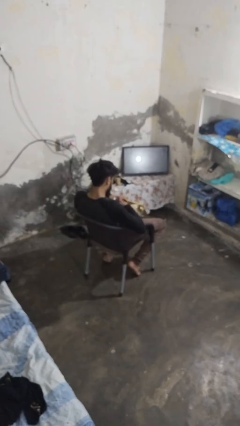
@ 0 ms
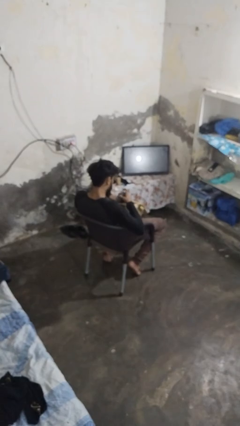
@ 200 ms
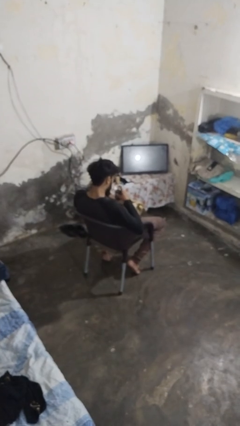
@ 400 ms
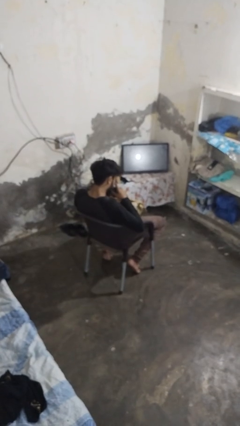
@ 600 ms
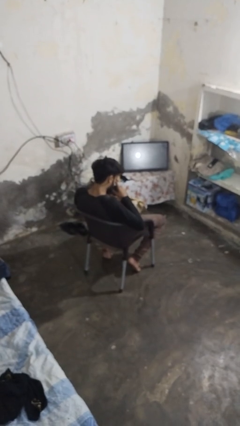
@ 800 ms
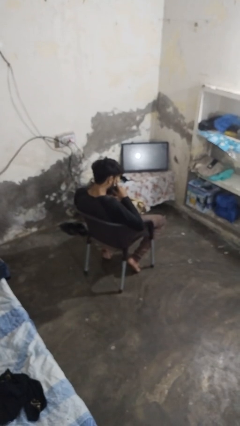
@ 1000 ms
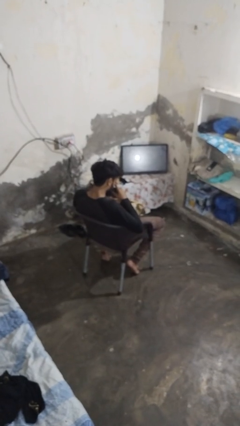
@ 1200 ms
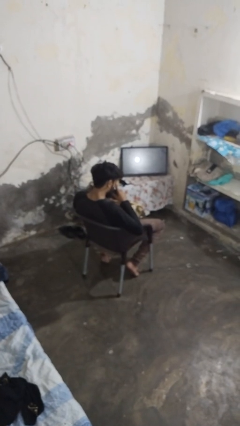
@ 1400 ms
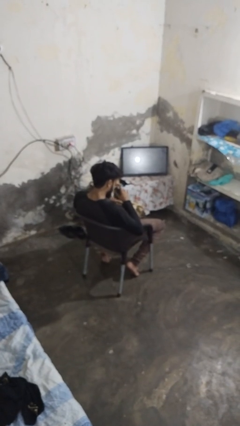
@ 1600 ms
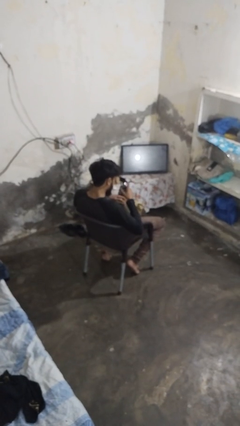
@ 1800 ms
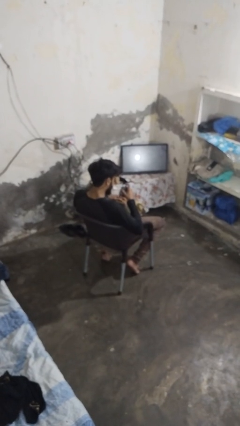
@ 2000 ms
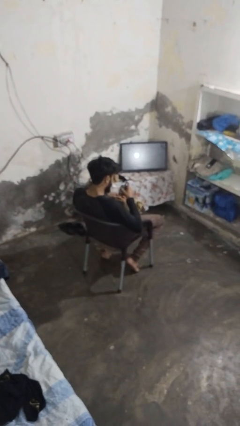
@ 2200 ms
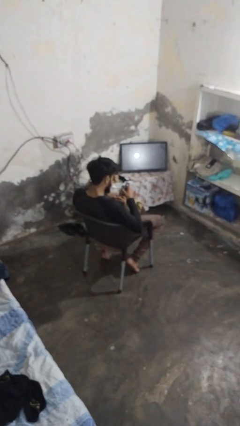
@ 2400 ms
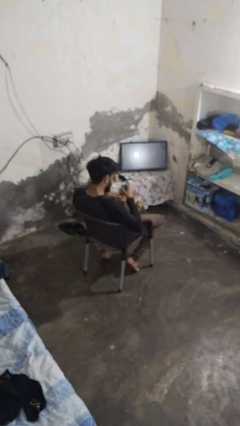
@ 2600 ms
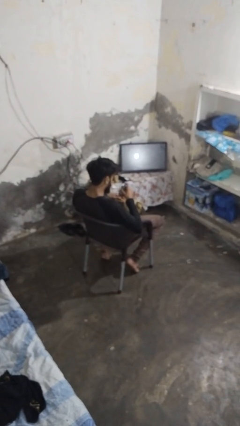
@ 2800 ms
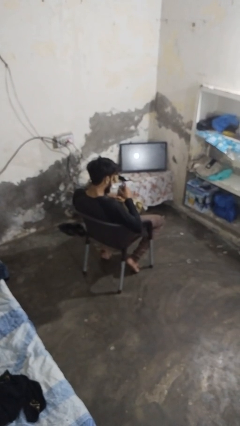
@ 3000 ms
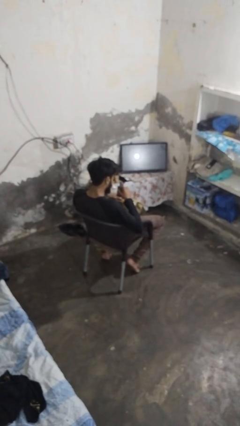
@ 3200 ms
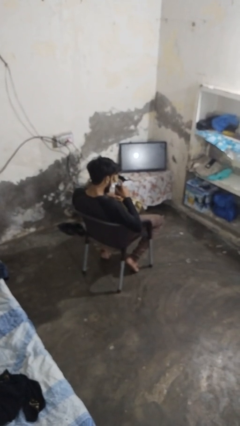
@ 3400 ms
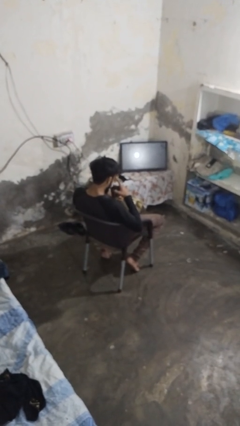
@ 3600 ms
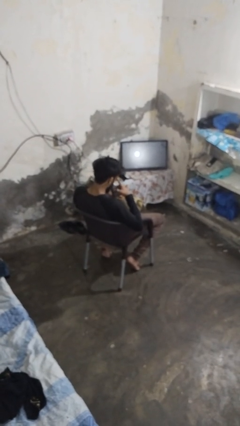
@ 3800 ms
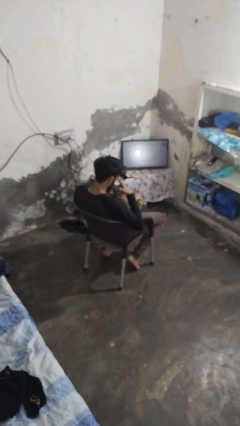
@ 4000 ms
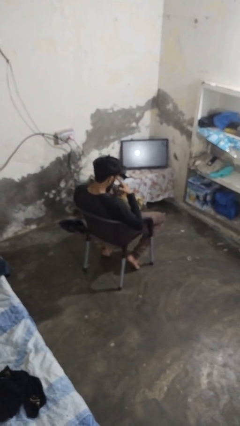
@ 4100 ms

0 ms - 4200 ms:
person takes object from purse

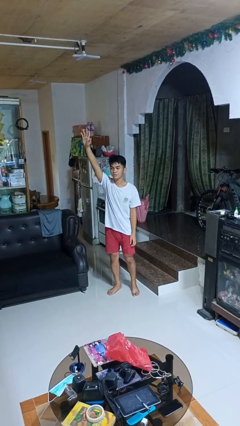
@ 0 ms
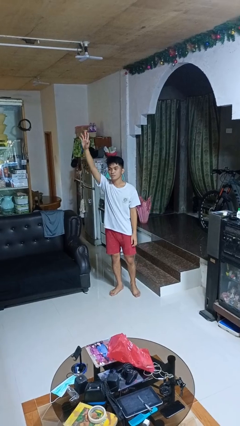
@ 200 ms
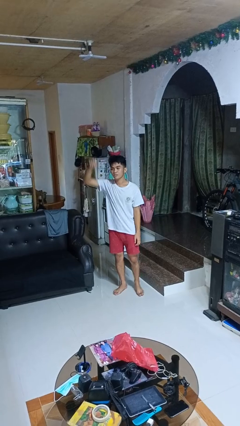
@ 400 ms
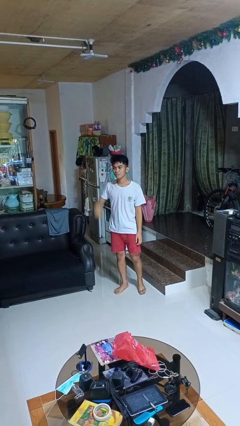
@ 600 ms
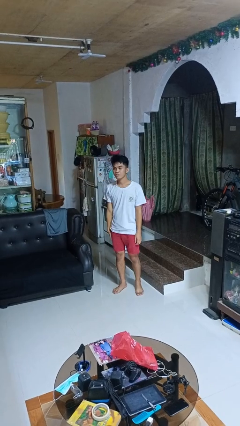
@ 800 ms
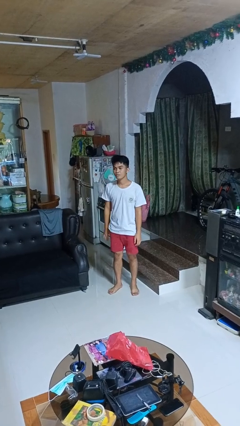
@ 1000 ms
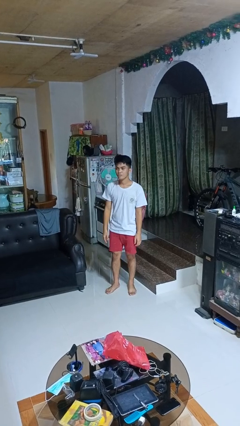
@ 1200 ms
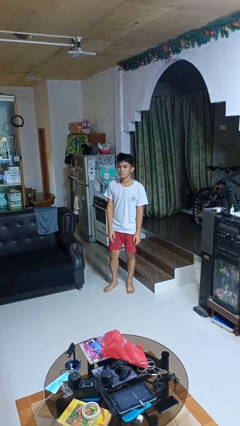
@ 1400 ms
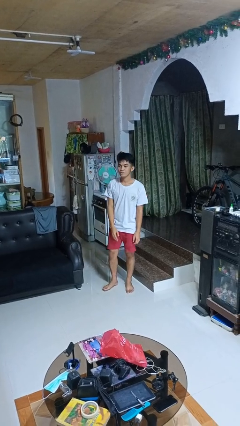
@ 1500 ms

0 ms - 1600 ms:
person gestures lower hand

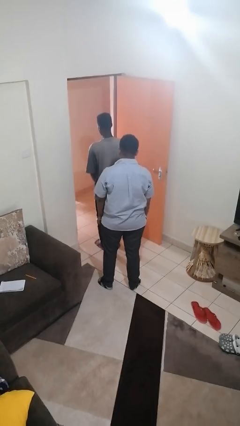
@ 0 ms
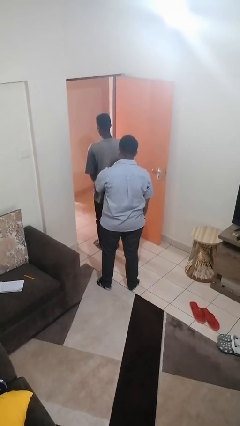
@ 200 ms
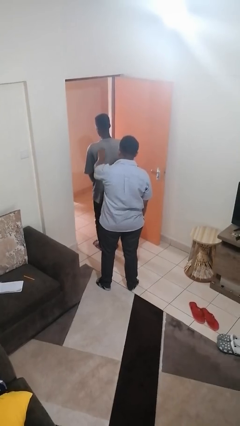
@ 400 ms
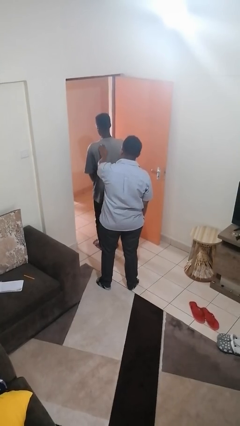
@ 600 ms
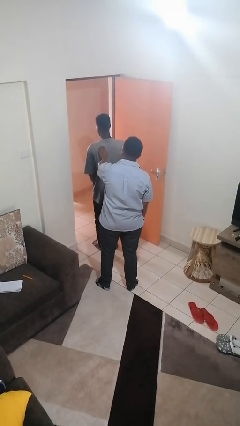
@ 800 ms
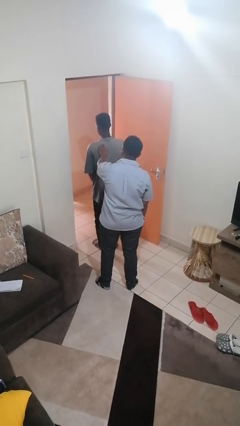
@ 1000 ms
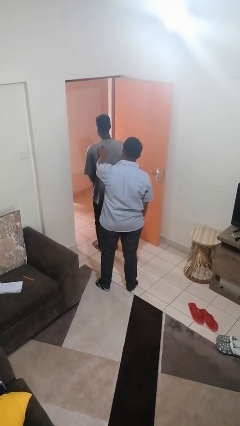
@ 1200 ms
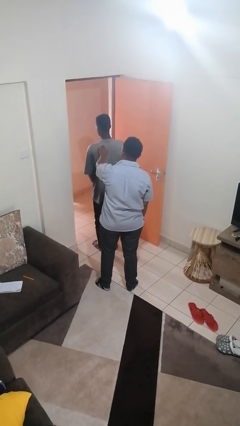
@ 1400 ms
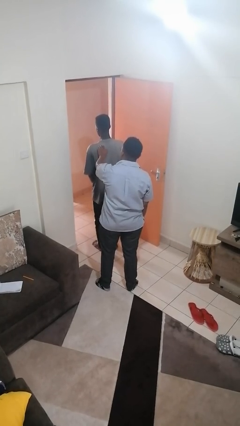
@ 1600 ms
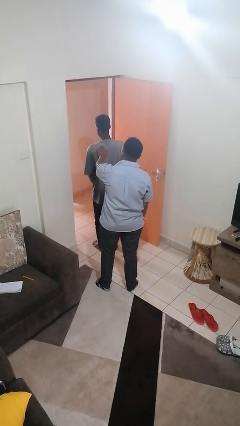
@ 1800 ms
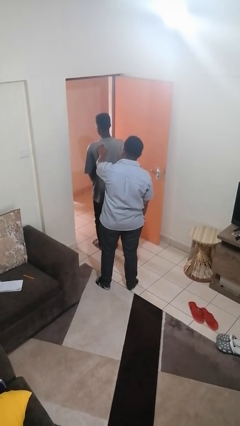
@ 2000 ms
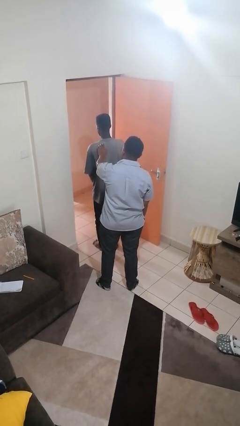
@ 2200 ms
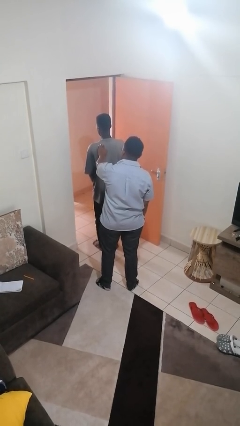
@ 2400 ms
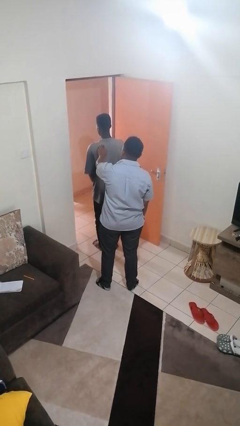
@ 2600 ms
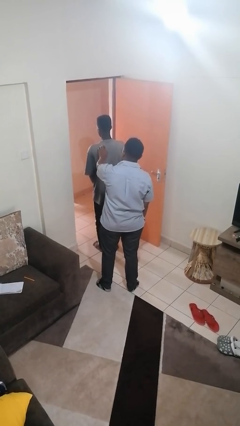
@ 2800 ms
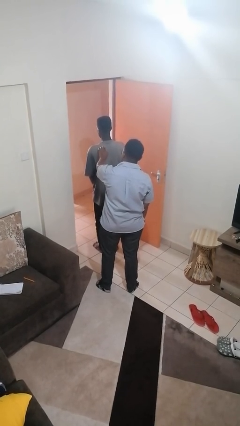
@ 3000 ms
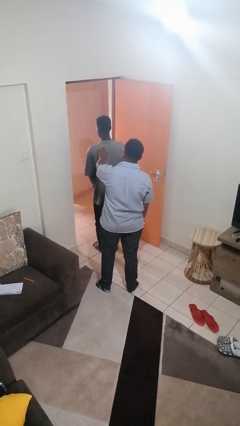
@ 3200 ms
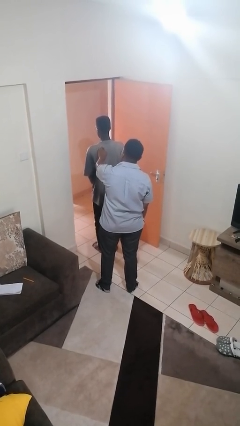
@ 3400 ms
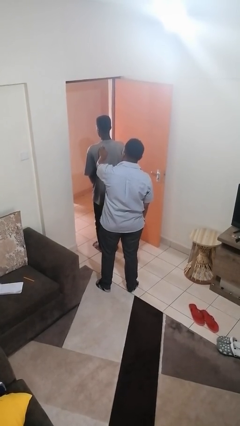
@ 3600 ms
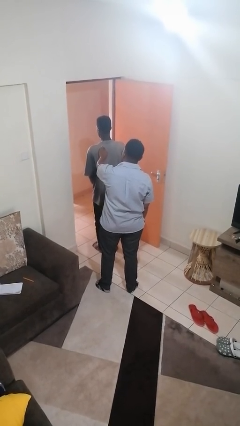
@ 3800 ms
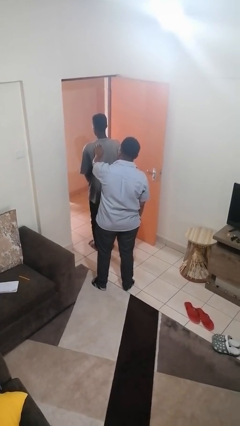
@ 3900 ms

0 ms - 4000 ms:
person touches back of person

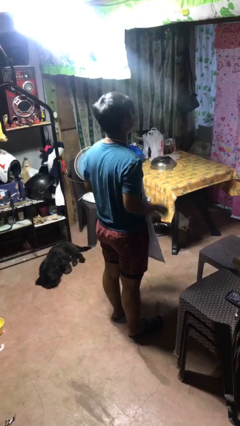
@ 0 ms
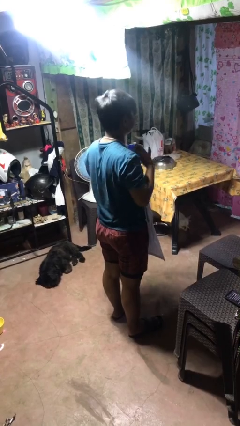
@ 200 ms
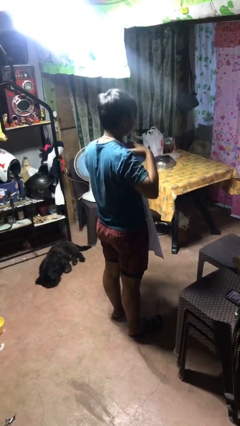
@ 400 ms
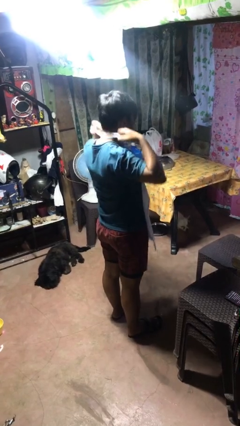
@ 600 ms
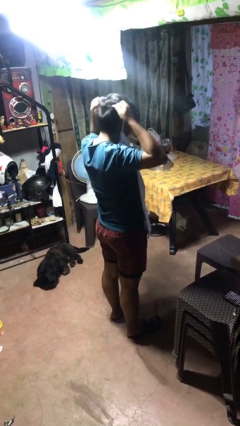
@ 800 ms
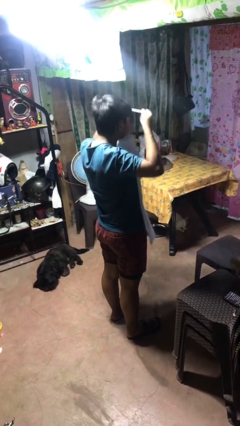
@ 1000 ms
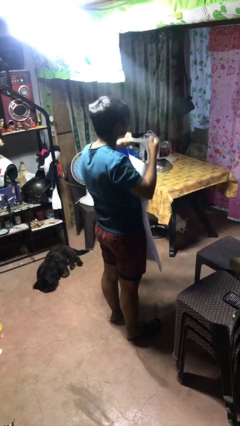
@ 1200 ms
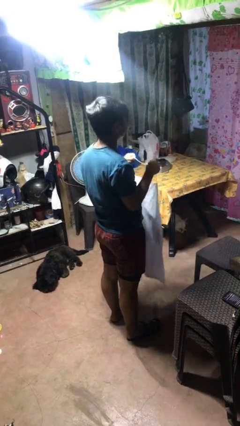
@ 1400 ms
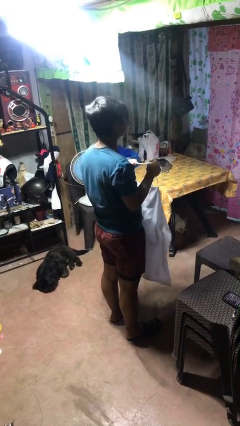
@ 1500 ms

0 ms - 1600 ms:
person takes off apron

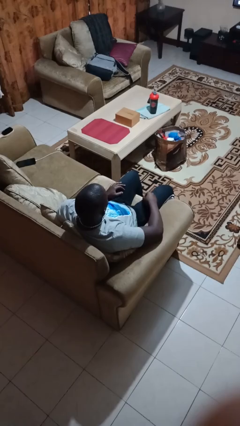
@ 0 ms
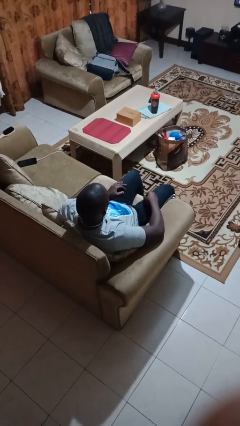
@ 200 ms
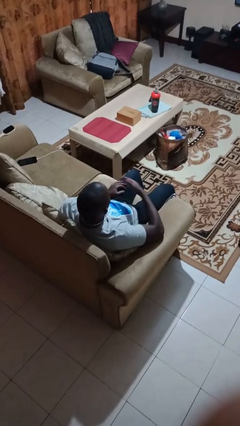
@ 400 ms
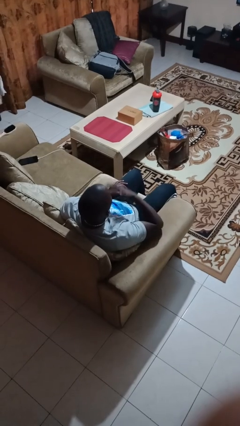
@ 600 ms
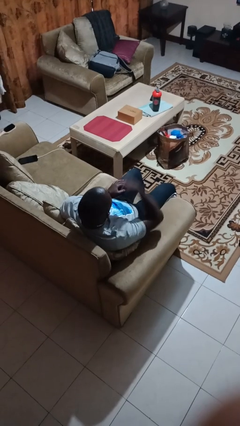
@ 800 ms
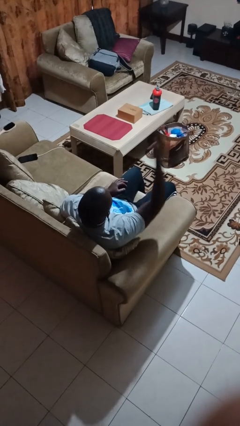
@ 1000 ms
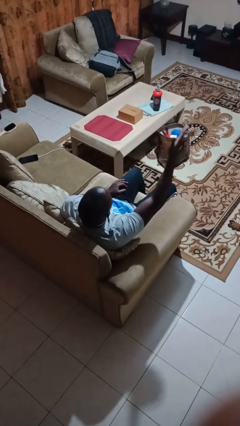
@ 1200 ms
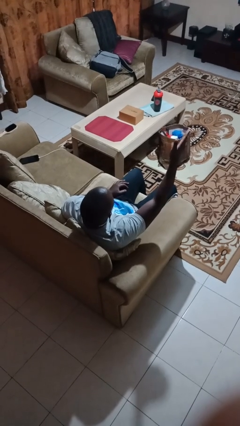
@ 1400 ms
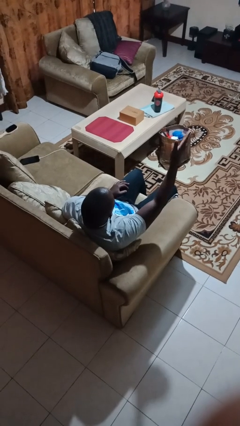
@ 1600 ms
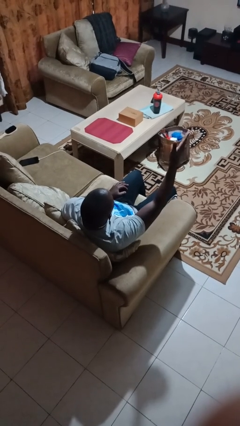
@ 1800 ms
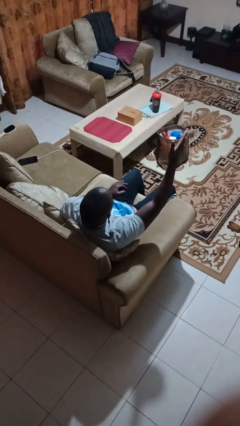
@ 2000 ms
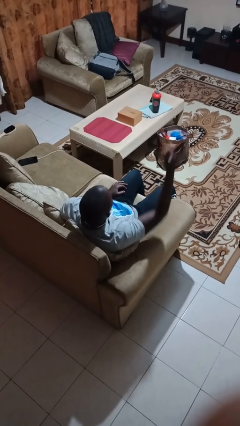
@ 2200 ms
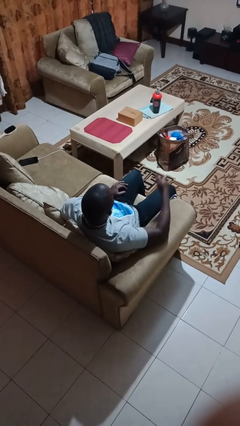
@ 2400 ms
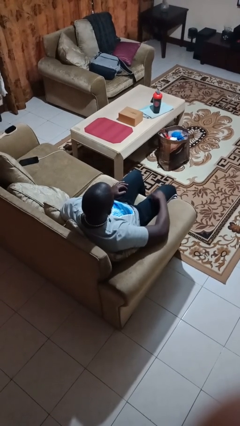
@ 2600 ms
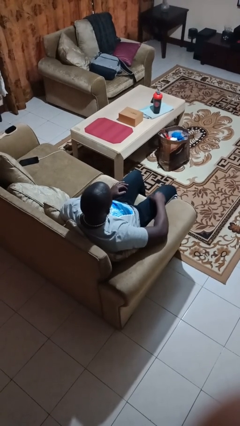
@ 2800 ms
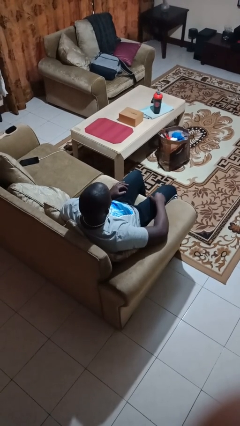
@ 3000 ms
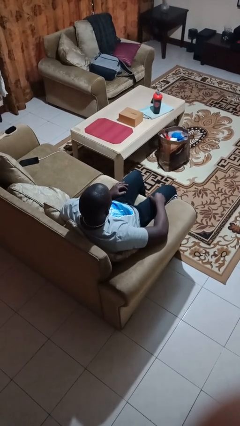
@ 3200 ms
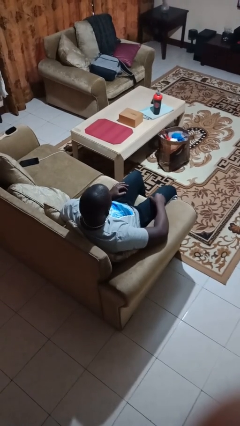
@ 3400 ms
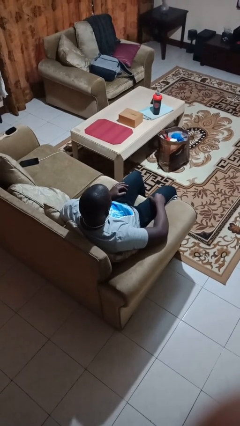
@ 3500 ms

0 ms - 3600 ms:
person gestures blow kiss

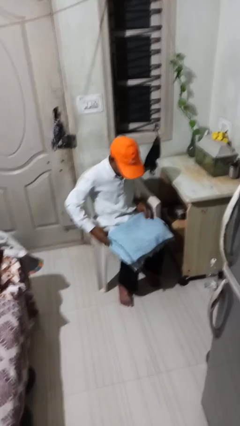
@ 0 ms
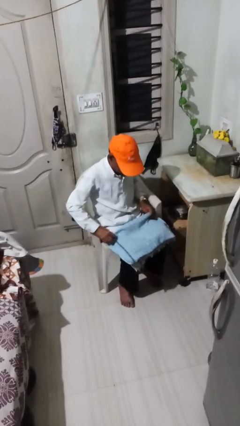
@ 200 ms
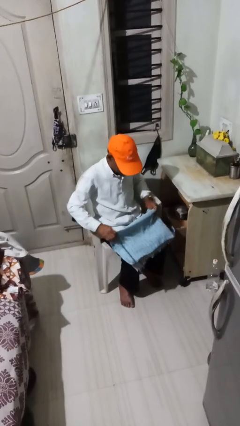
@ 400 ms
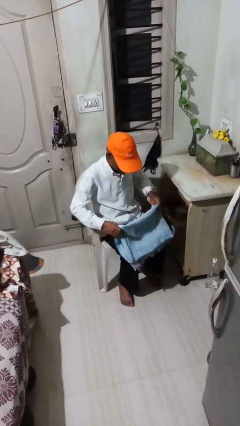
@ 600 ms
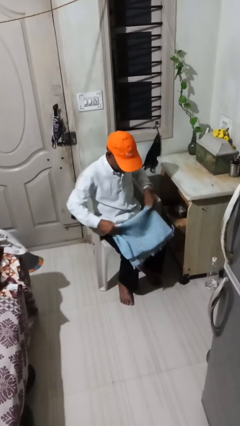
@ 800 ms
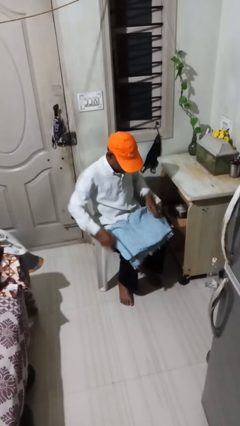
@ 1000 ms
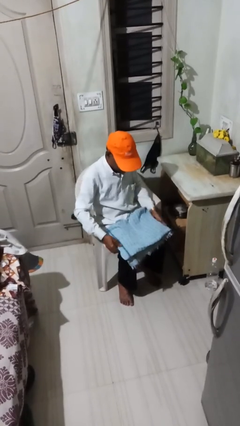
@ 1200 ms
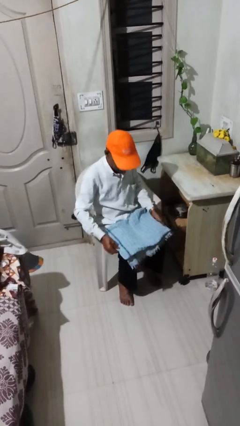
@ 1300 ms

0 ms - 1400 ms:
person spreads tablecloth

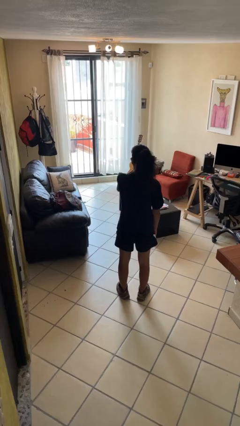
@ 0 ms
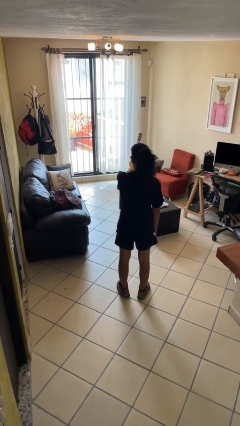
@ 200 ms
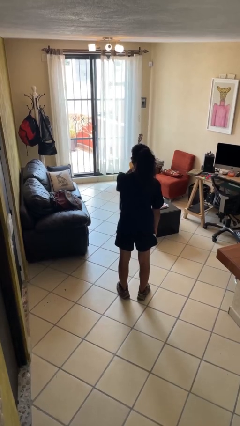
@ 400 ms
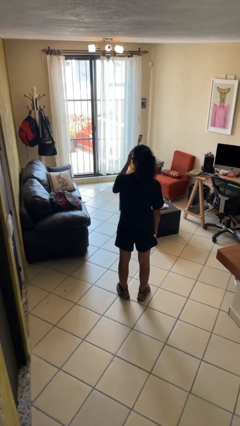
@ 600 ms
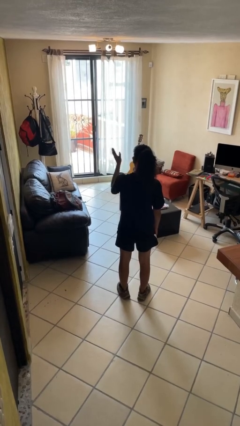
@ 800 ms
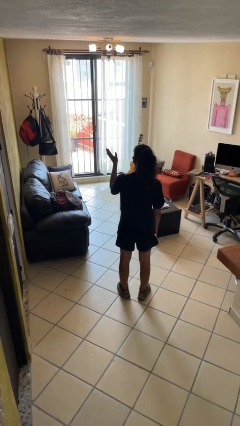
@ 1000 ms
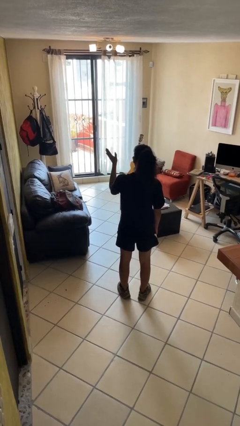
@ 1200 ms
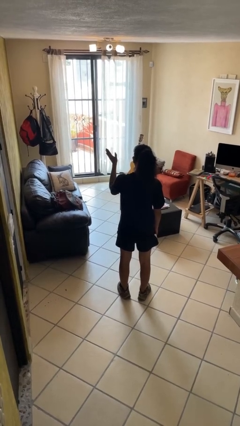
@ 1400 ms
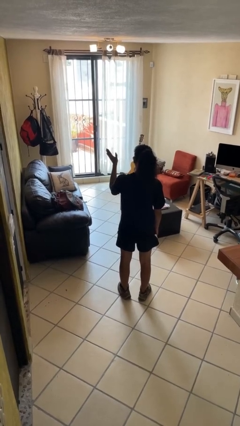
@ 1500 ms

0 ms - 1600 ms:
person gestures swipe left
